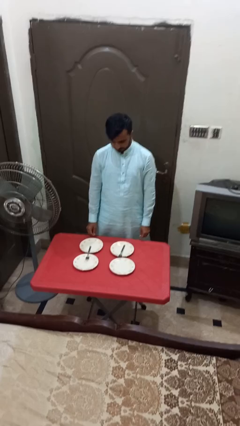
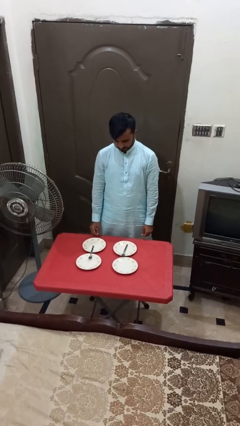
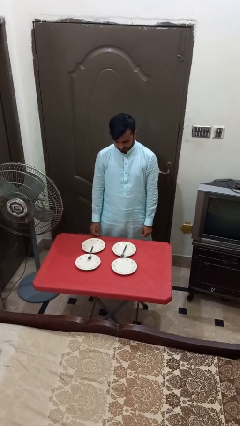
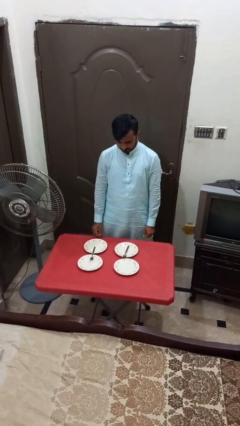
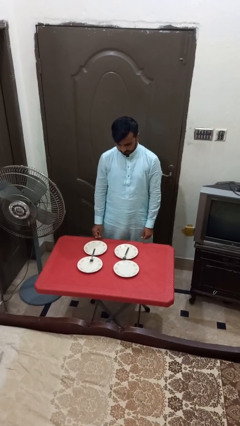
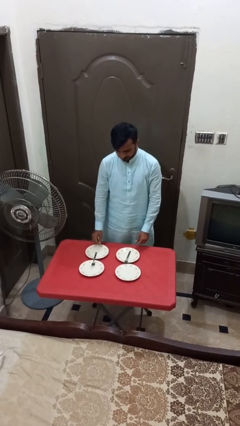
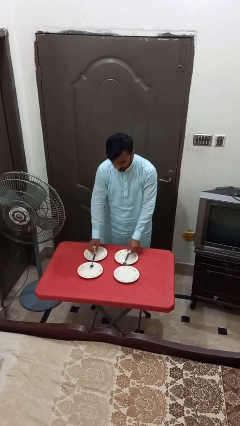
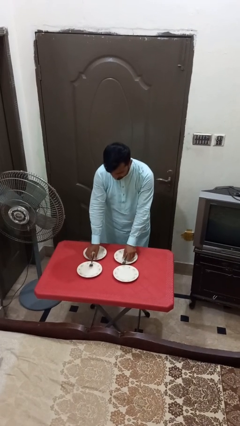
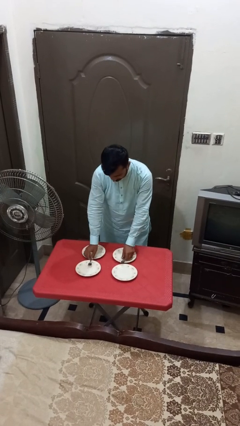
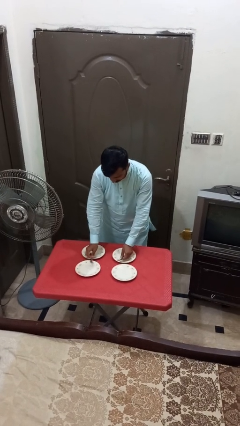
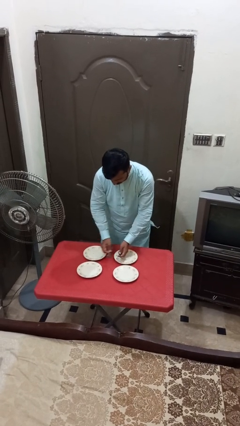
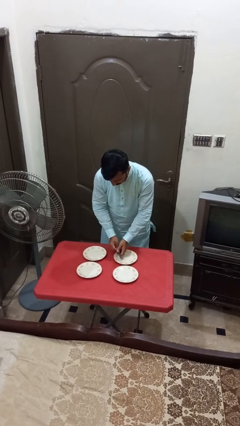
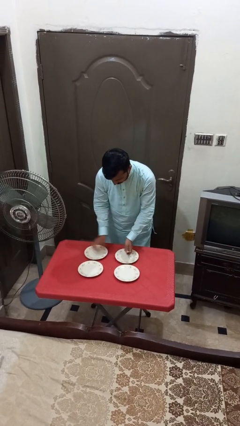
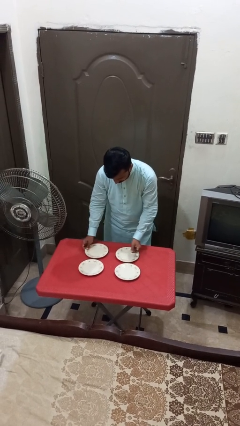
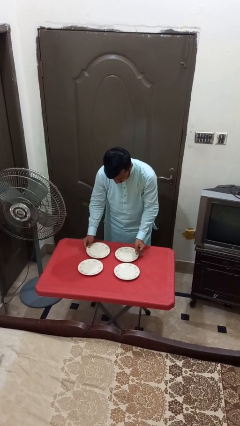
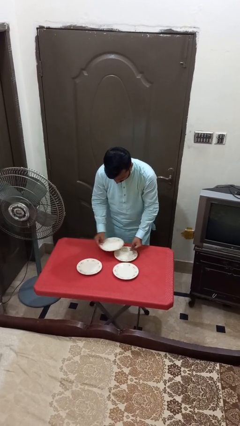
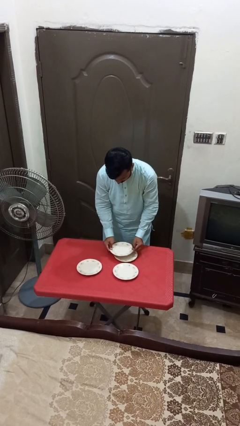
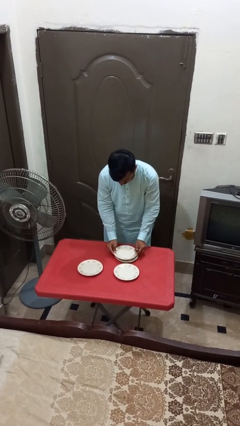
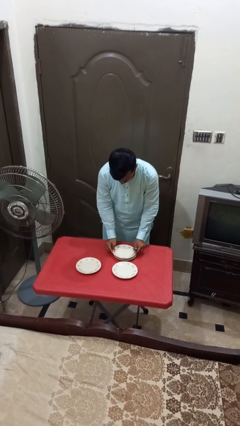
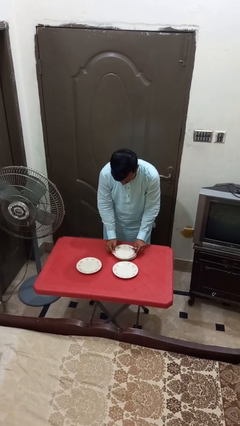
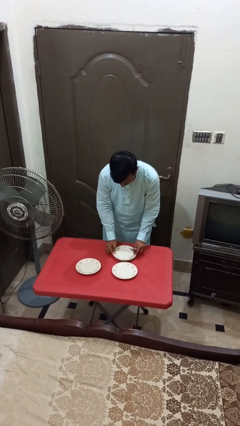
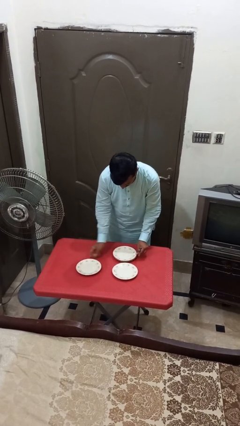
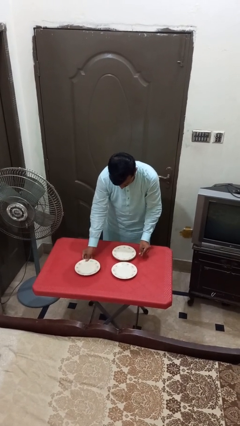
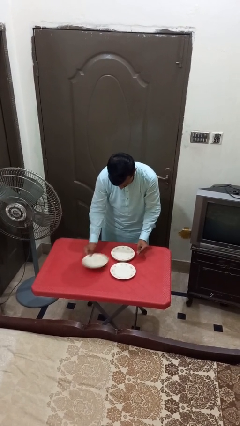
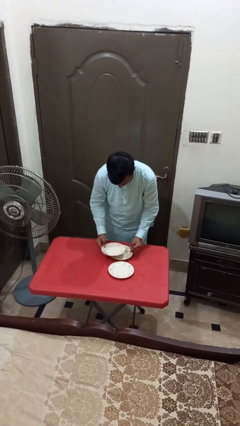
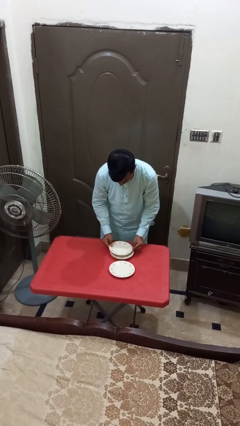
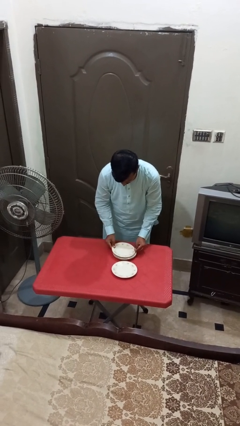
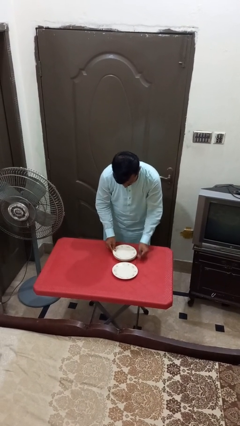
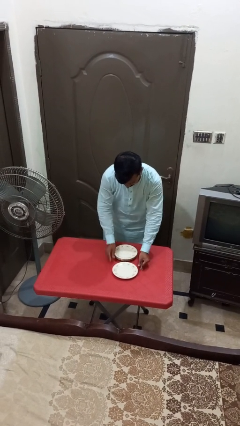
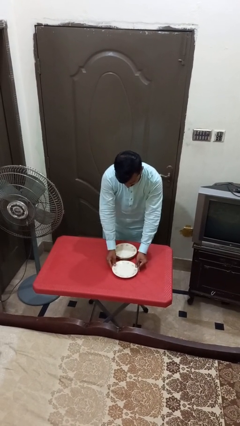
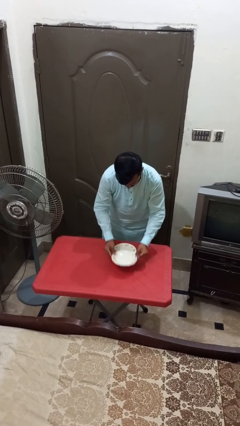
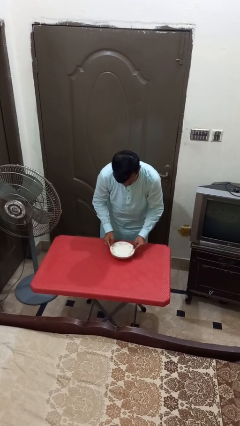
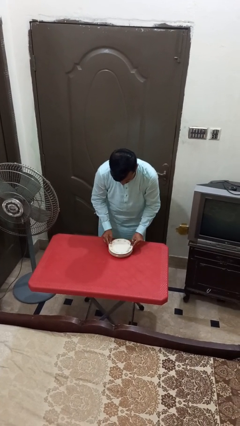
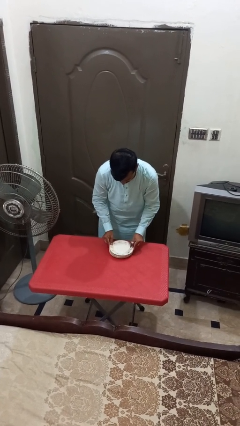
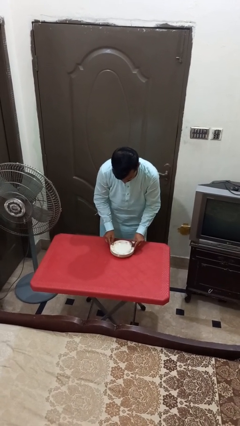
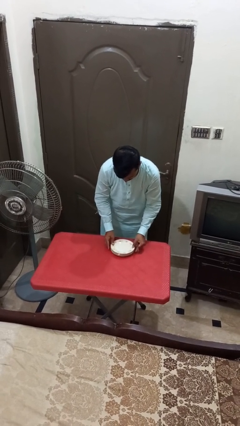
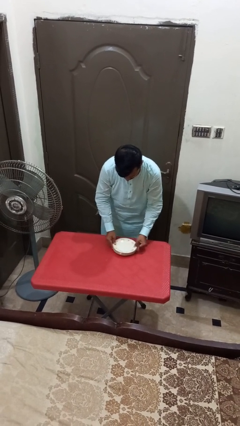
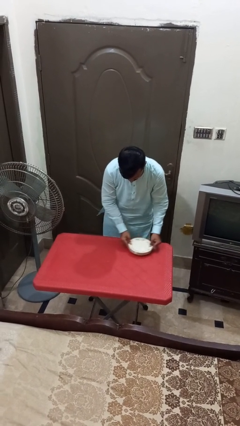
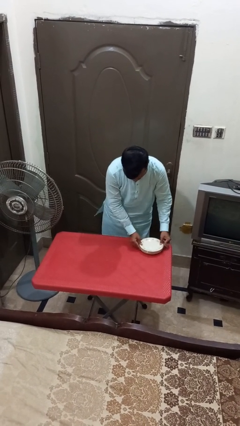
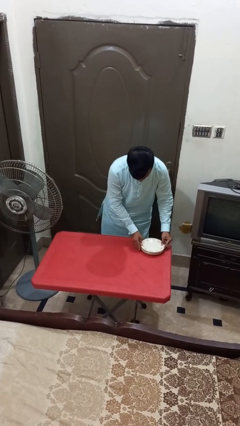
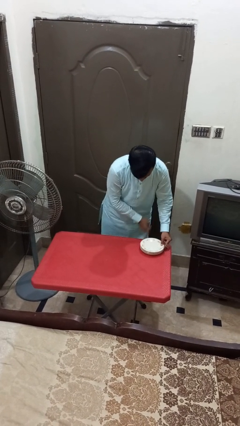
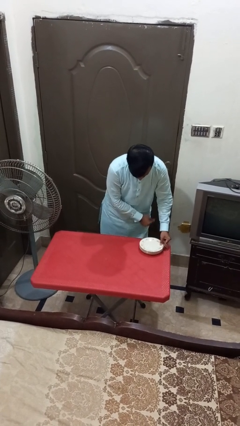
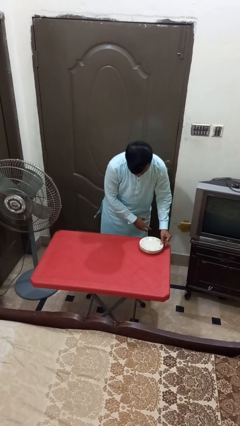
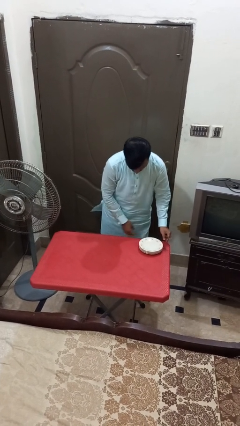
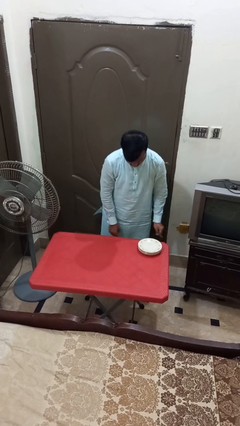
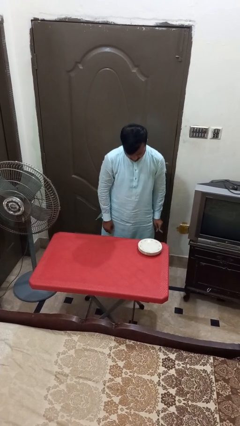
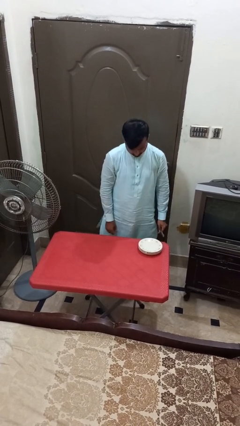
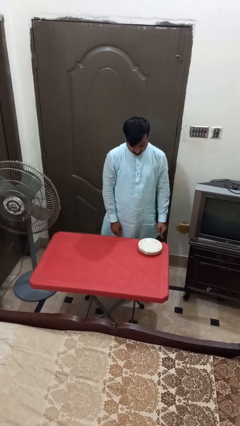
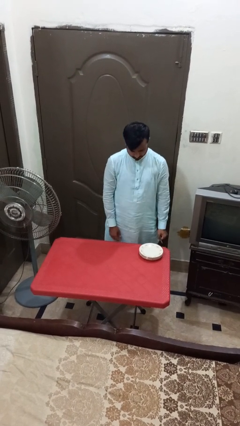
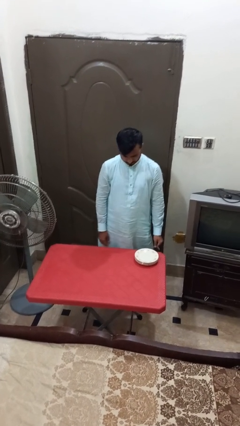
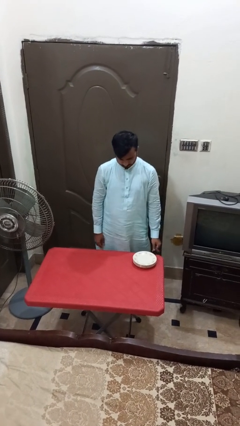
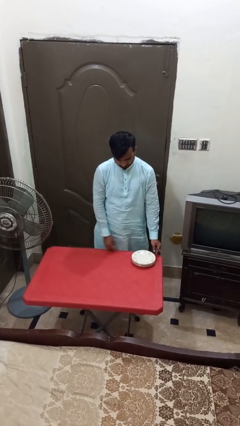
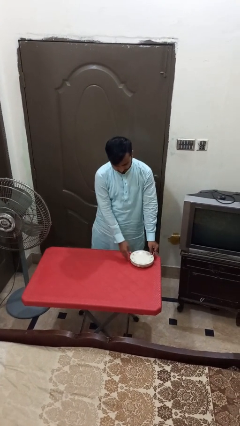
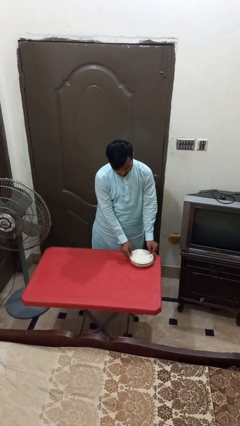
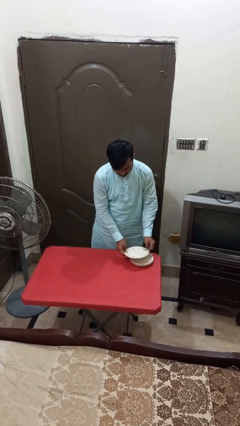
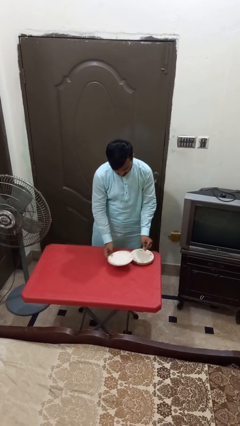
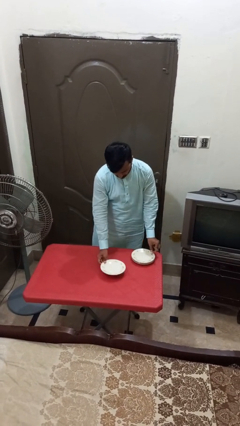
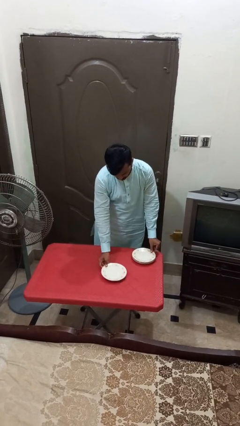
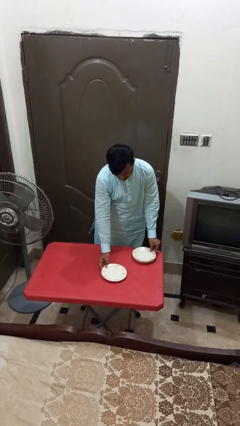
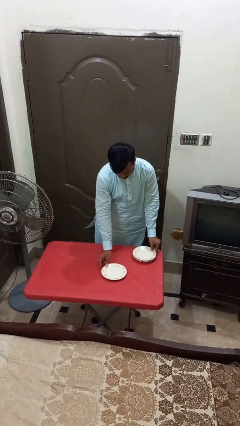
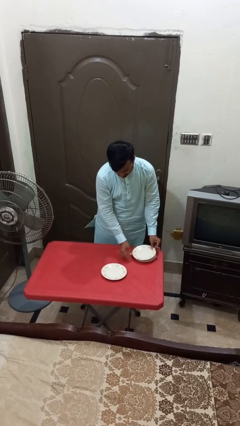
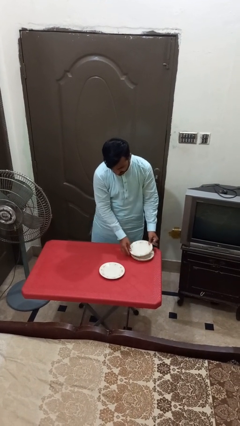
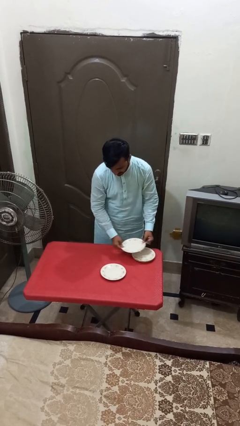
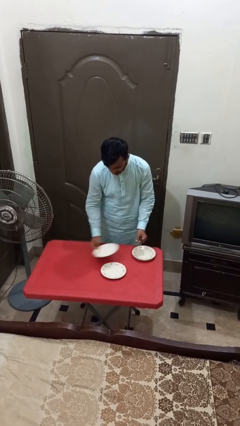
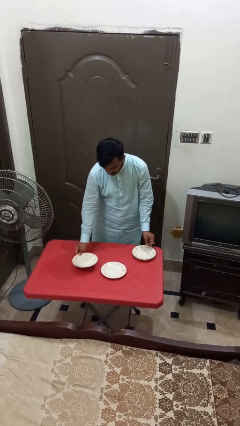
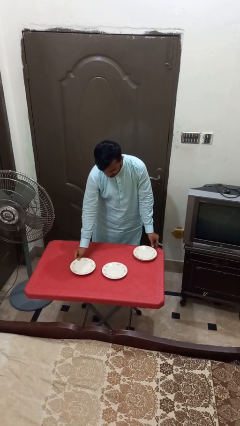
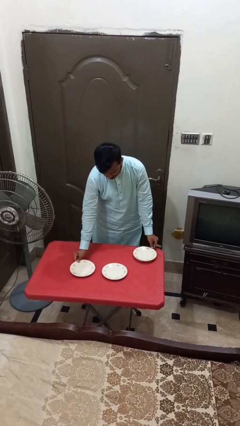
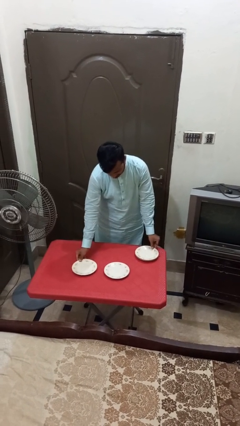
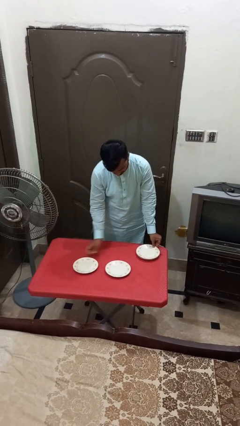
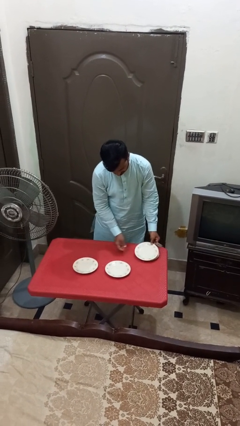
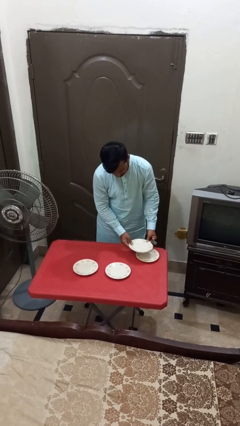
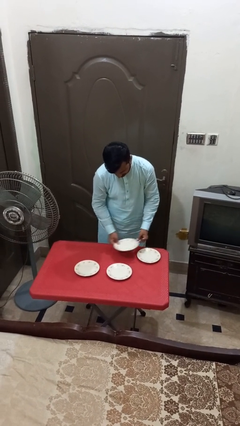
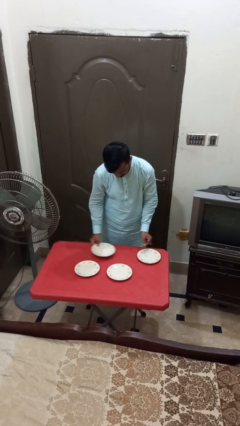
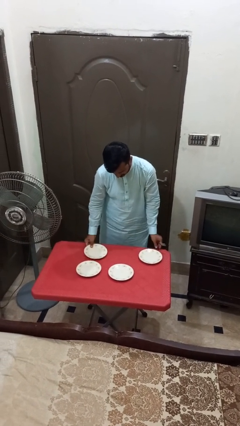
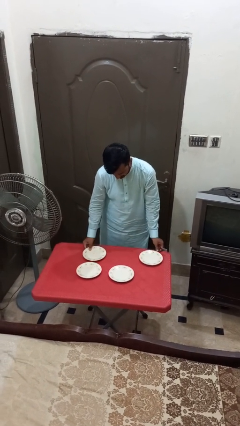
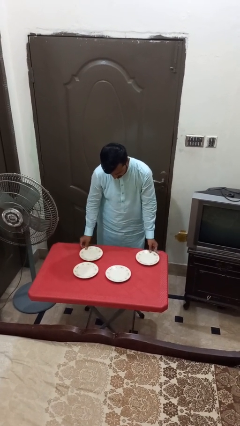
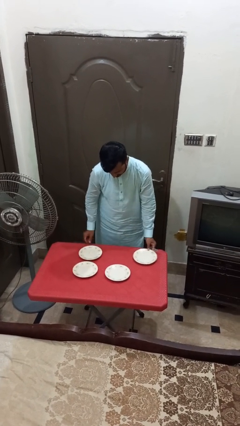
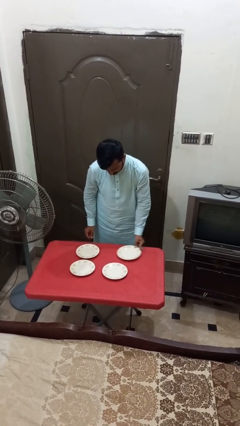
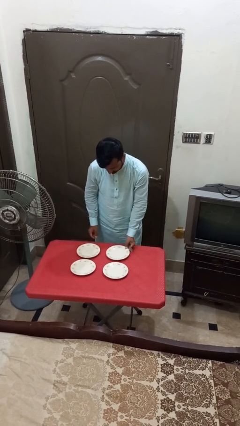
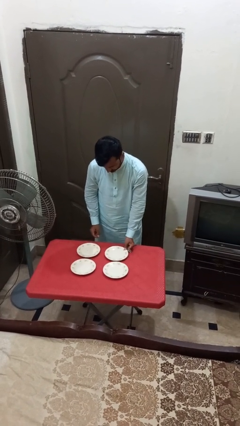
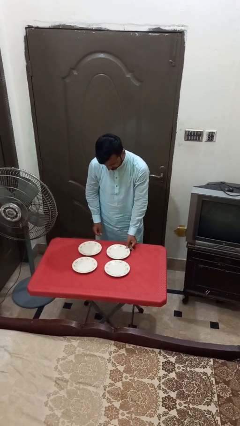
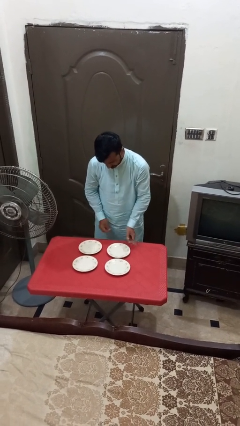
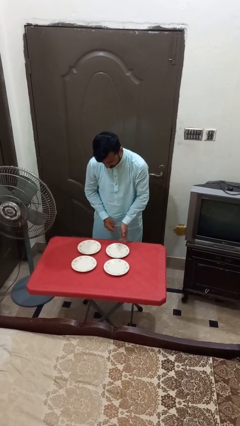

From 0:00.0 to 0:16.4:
person sets table

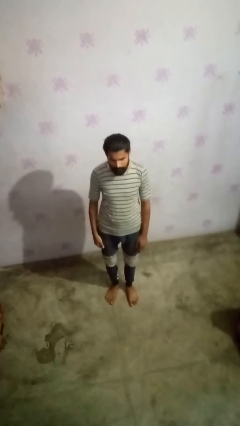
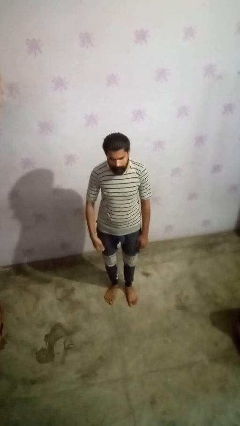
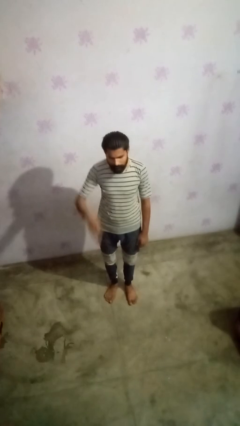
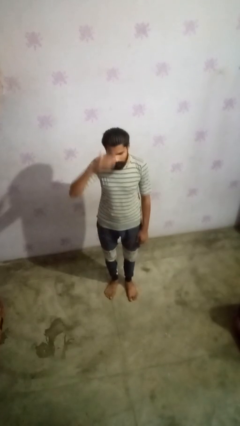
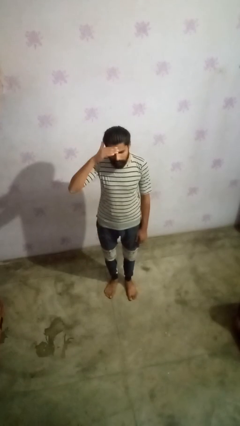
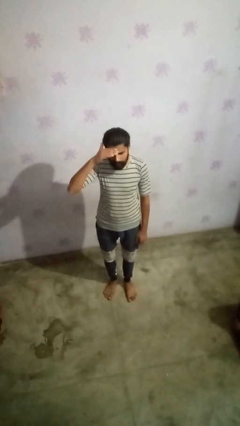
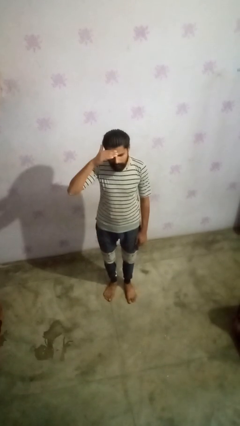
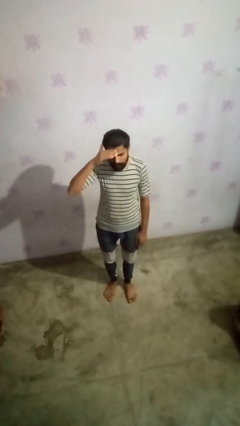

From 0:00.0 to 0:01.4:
person salutes
